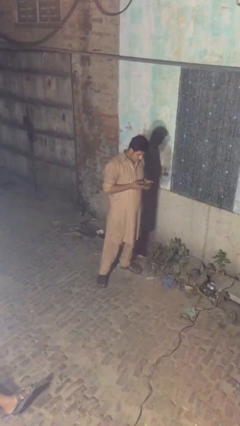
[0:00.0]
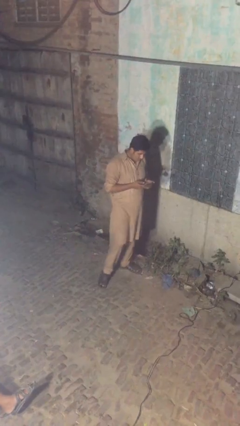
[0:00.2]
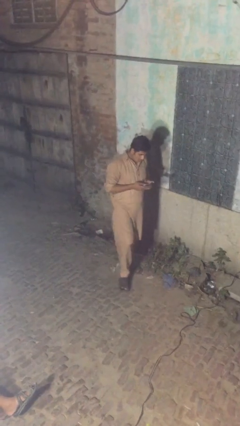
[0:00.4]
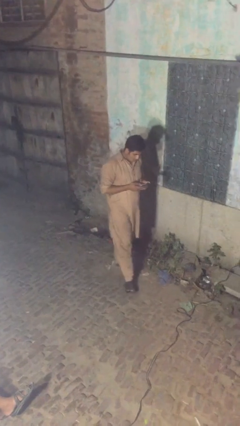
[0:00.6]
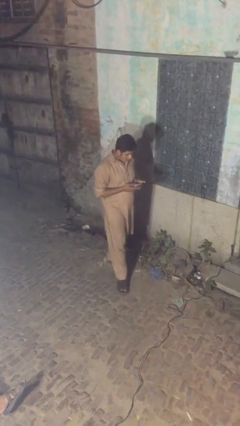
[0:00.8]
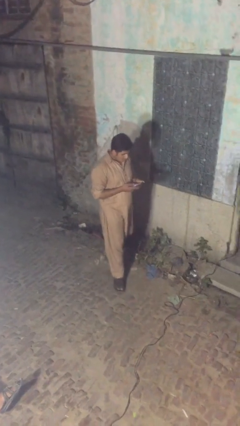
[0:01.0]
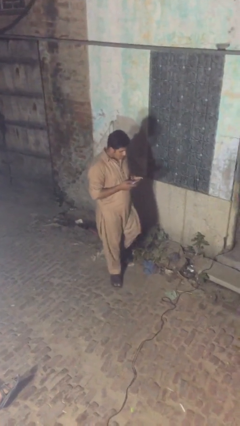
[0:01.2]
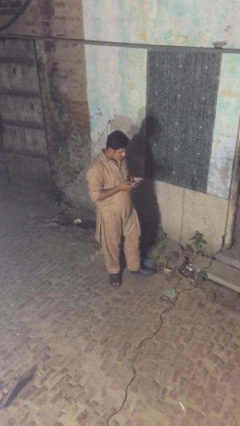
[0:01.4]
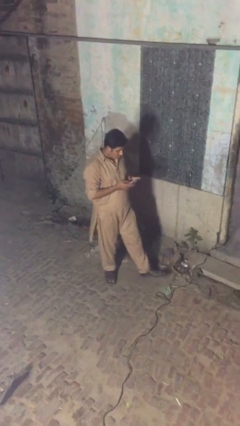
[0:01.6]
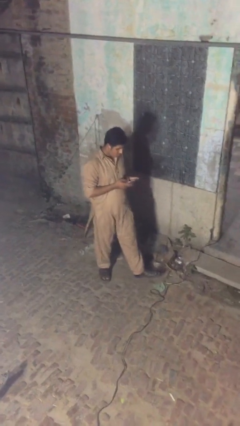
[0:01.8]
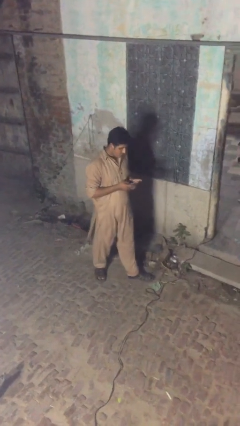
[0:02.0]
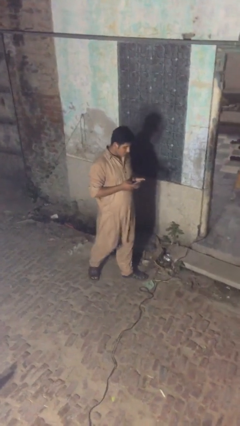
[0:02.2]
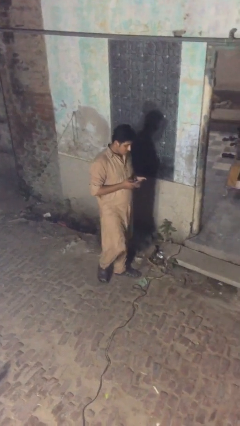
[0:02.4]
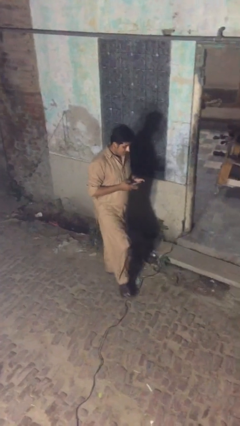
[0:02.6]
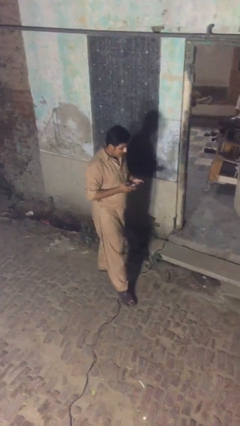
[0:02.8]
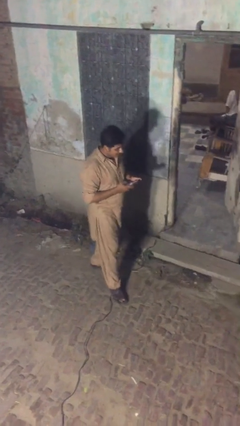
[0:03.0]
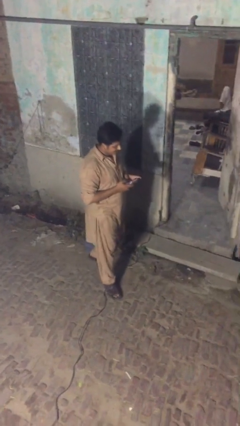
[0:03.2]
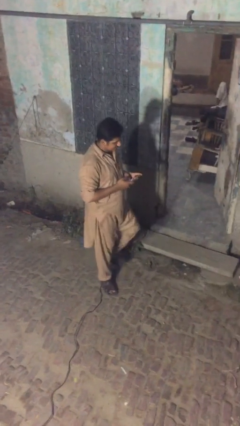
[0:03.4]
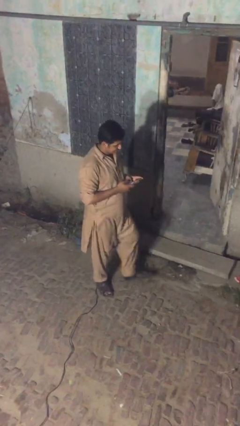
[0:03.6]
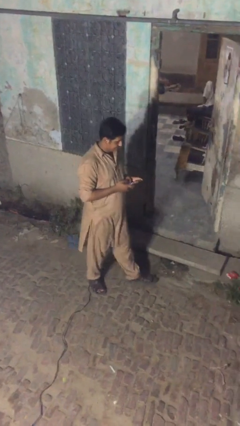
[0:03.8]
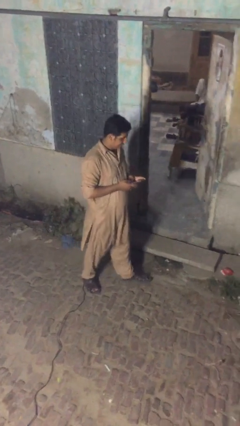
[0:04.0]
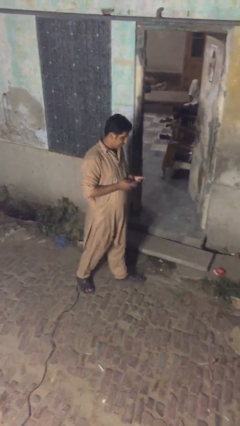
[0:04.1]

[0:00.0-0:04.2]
person texts on phone

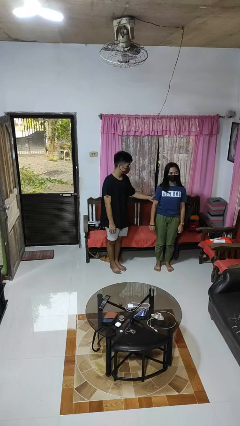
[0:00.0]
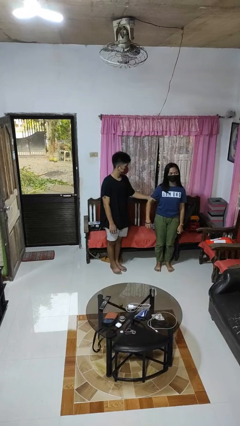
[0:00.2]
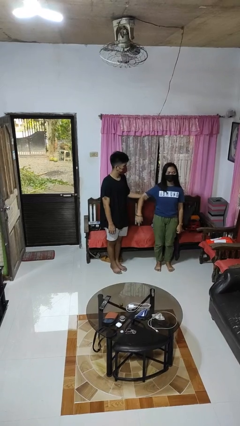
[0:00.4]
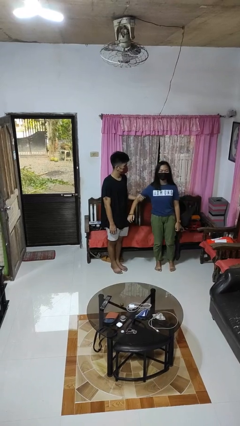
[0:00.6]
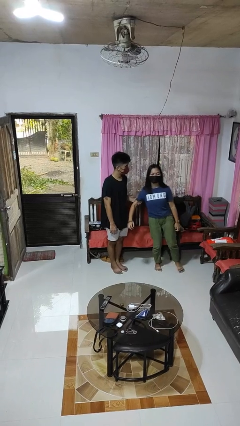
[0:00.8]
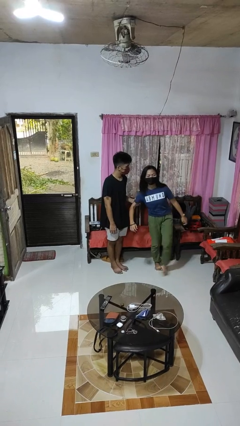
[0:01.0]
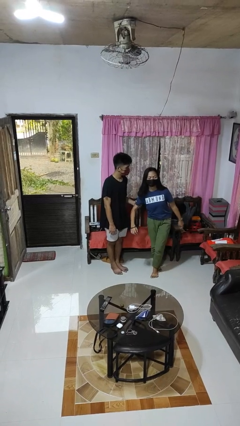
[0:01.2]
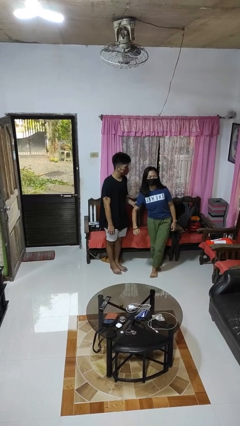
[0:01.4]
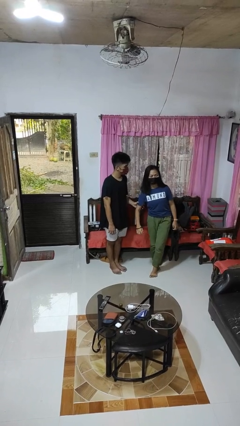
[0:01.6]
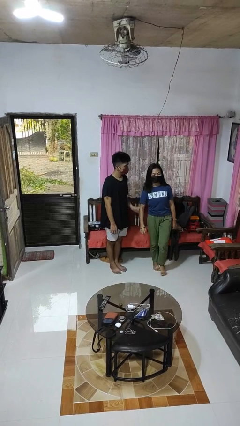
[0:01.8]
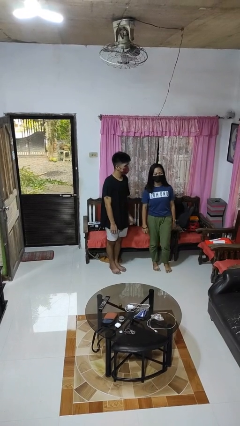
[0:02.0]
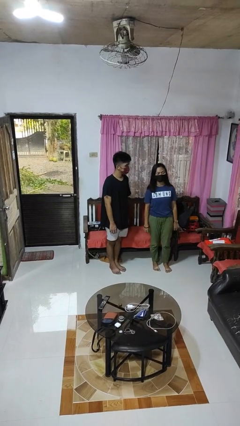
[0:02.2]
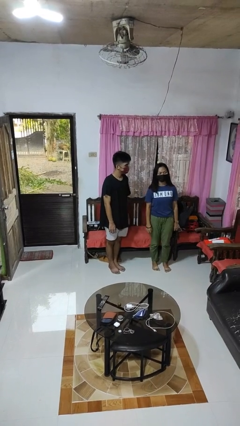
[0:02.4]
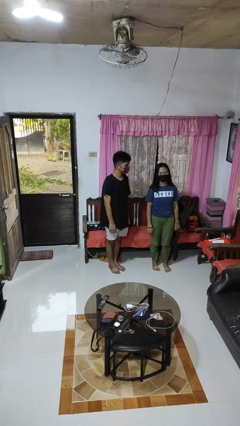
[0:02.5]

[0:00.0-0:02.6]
person grabs person by bicep

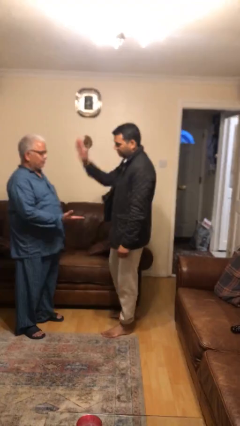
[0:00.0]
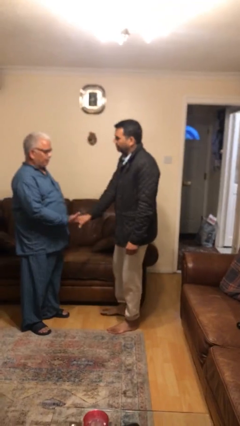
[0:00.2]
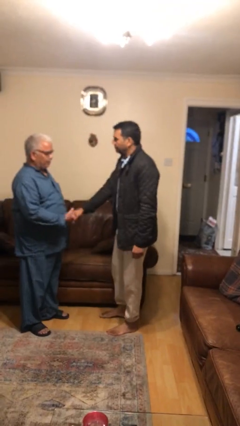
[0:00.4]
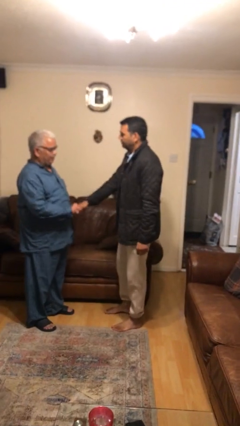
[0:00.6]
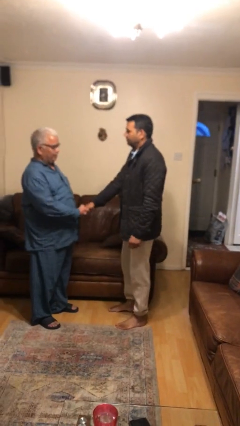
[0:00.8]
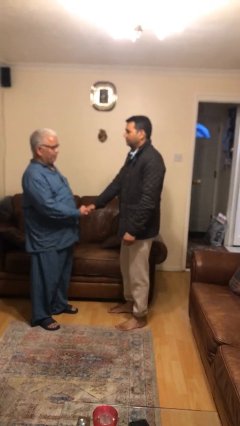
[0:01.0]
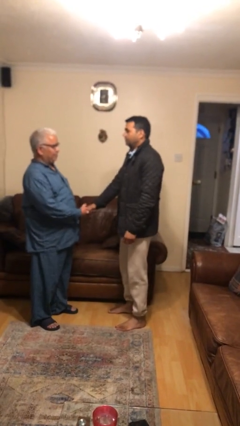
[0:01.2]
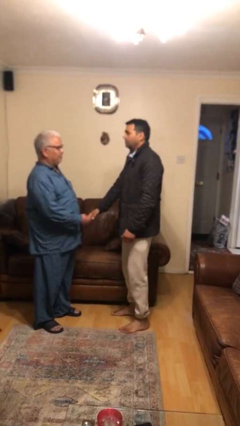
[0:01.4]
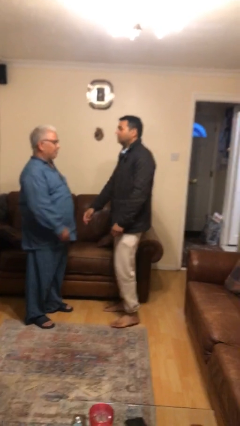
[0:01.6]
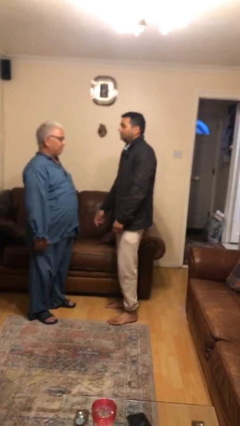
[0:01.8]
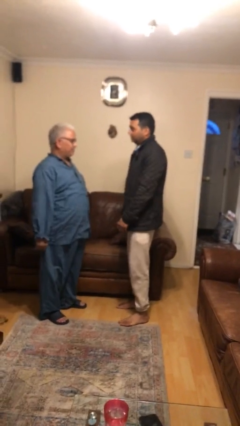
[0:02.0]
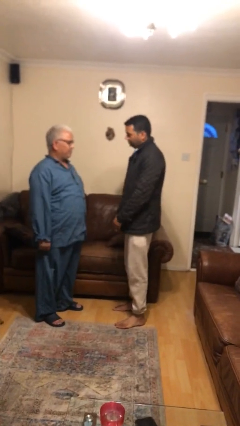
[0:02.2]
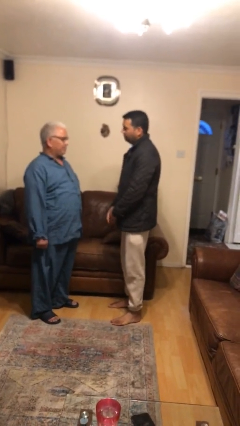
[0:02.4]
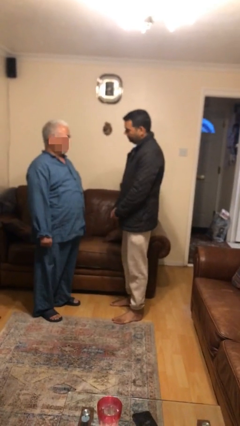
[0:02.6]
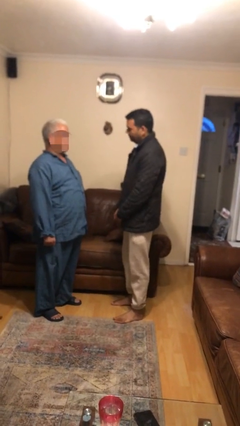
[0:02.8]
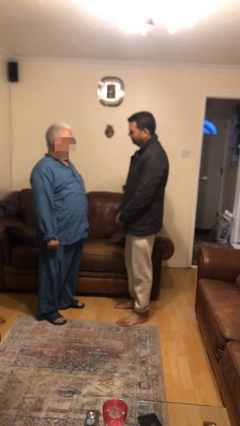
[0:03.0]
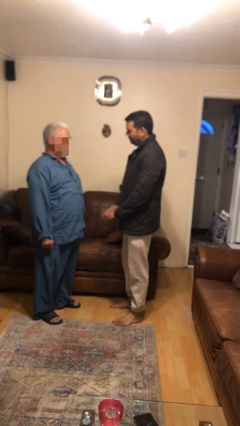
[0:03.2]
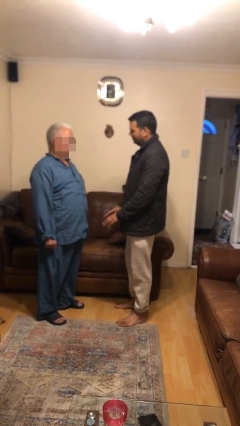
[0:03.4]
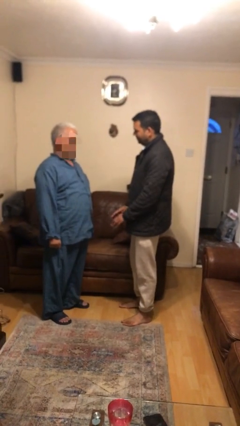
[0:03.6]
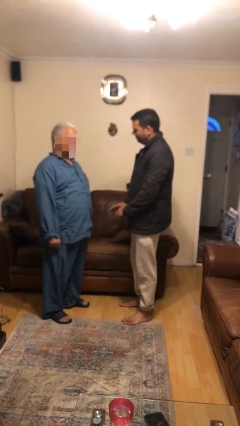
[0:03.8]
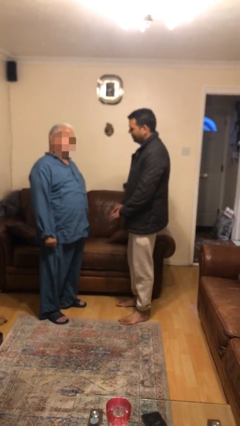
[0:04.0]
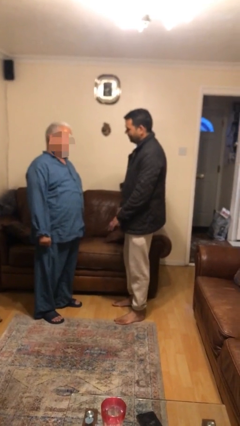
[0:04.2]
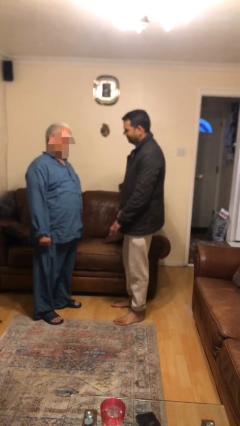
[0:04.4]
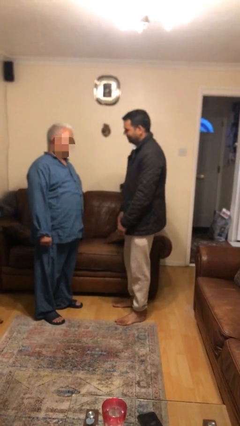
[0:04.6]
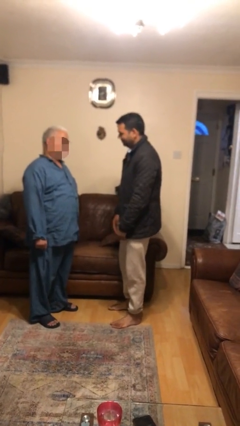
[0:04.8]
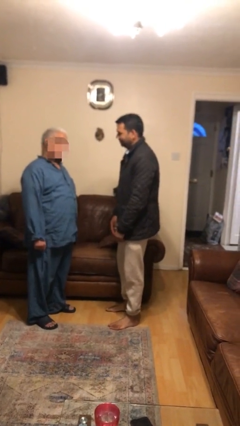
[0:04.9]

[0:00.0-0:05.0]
person highfives hand

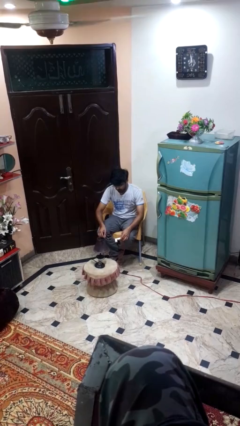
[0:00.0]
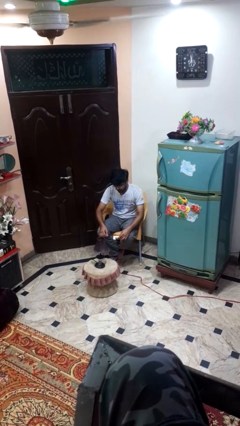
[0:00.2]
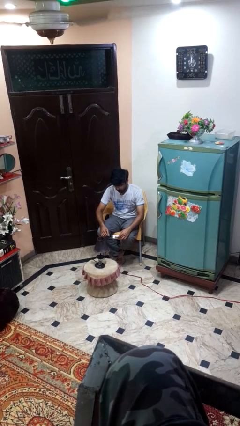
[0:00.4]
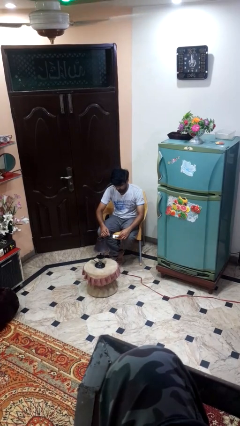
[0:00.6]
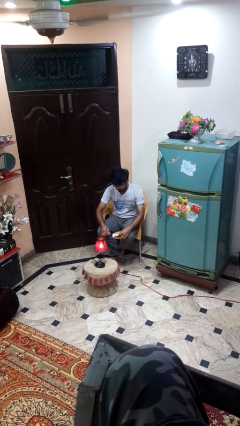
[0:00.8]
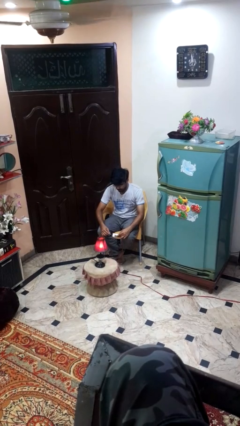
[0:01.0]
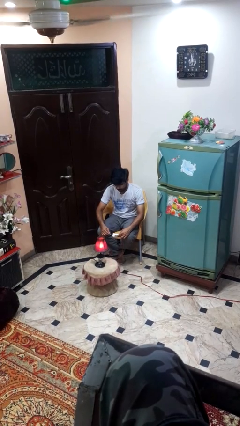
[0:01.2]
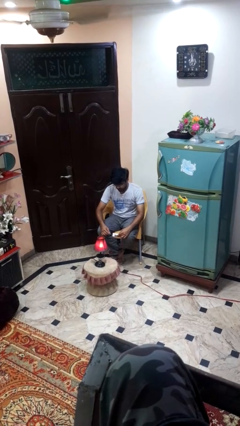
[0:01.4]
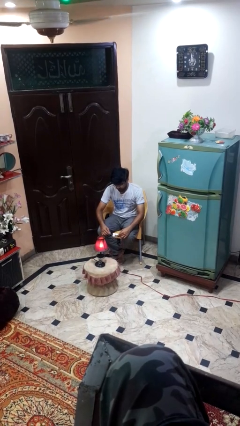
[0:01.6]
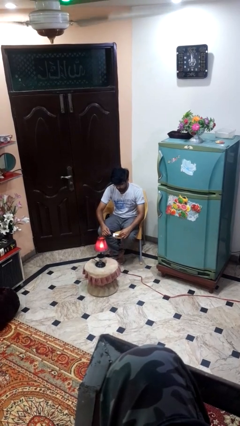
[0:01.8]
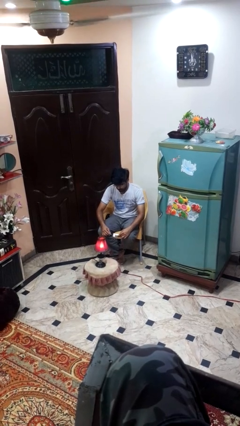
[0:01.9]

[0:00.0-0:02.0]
person turns on lamp

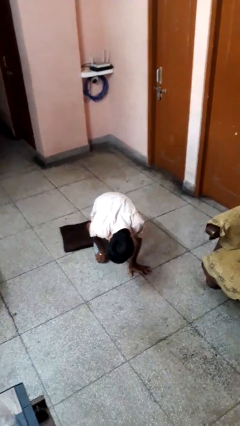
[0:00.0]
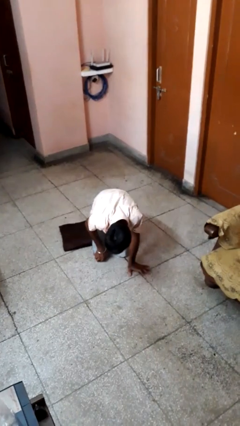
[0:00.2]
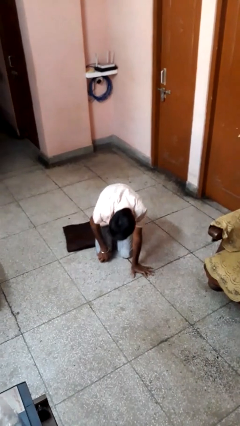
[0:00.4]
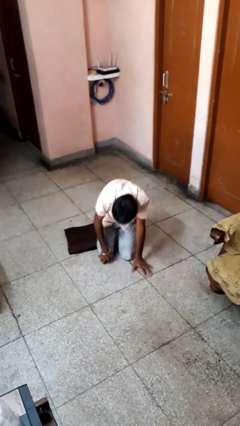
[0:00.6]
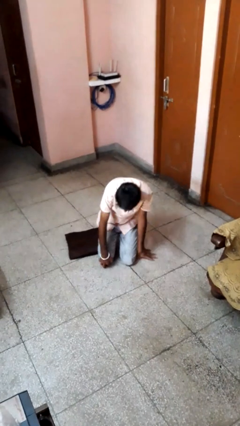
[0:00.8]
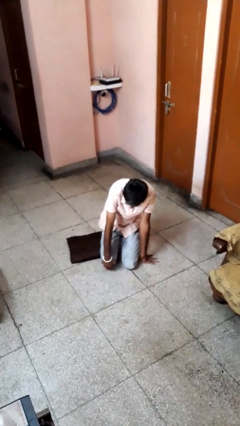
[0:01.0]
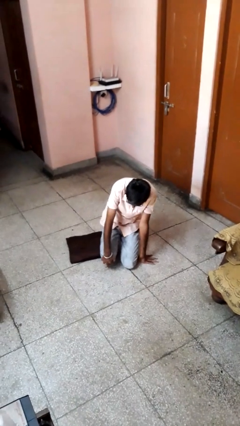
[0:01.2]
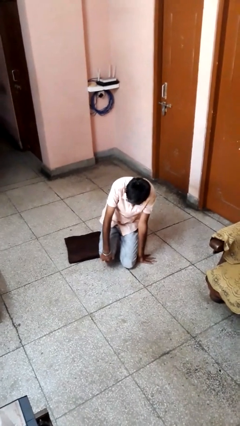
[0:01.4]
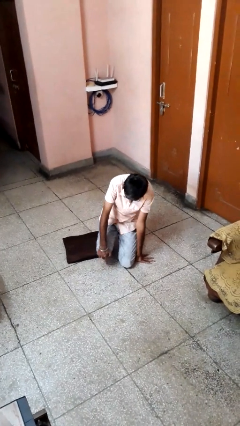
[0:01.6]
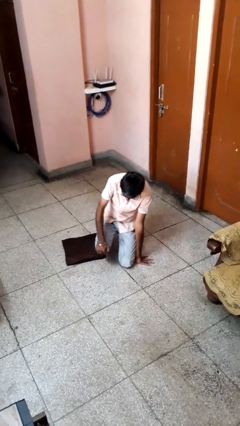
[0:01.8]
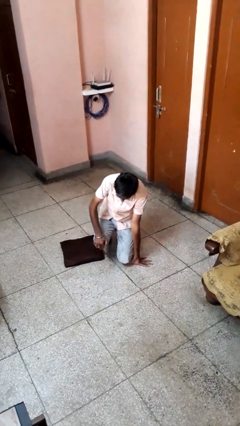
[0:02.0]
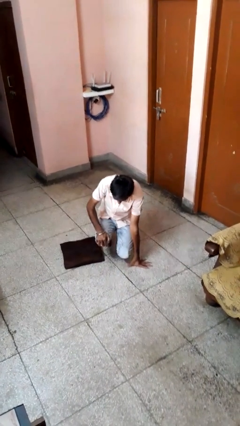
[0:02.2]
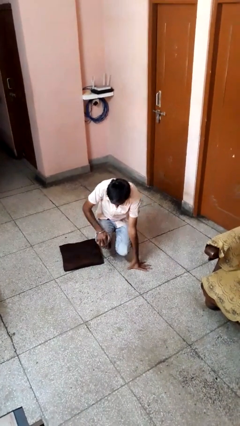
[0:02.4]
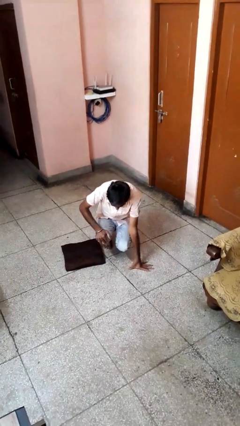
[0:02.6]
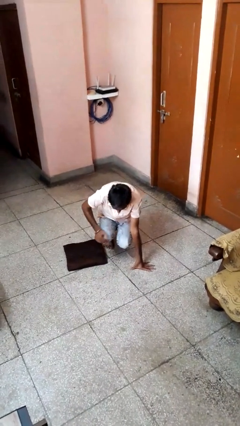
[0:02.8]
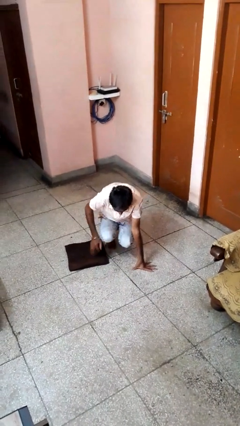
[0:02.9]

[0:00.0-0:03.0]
person lies down on floor

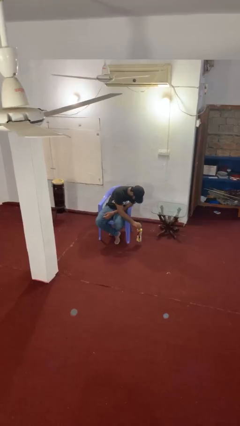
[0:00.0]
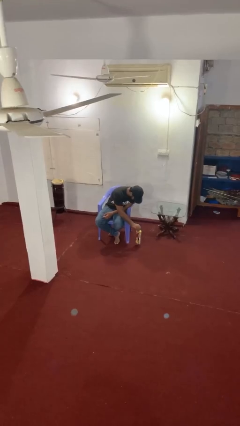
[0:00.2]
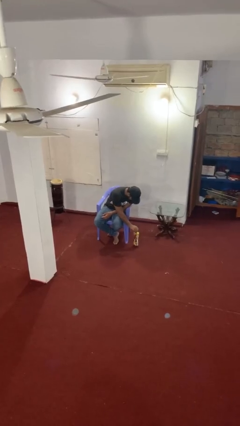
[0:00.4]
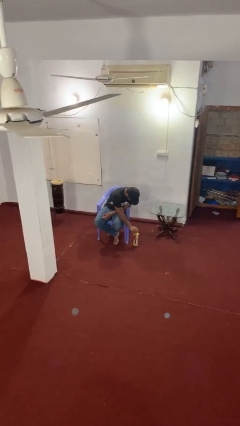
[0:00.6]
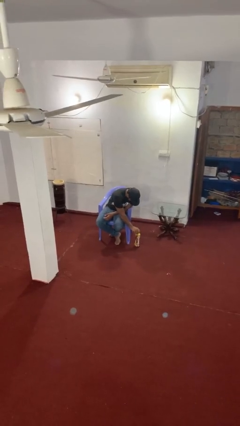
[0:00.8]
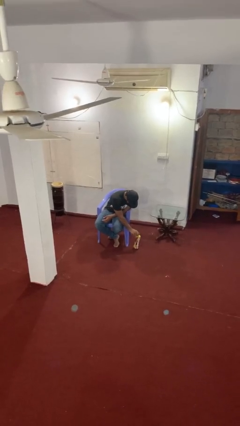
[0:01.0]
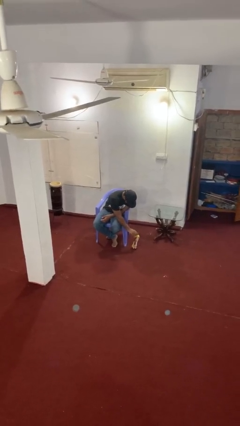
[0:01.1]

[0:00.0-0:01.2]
person puts down object on floor
